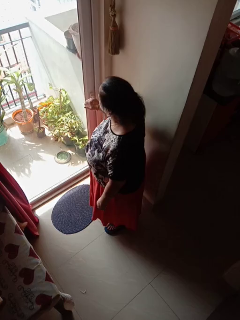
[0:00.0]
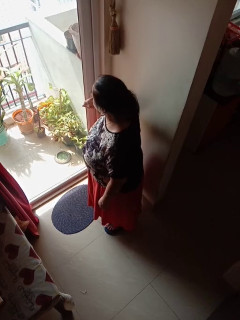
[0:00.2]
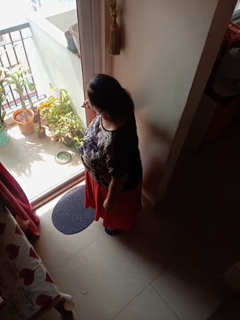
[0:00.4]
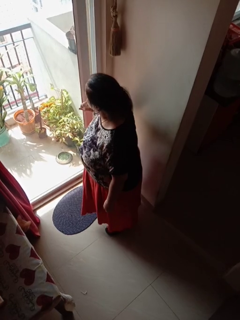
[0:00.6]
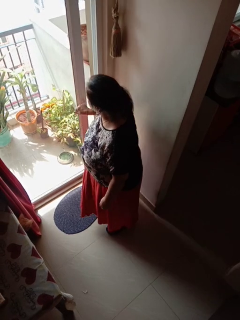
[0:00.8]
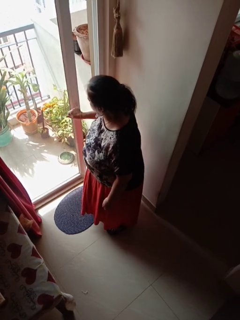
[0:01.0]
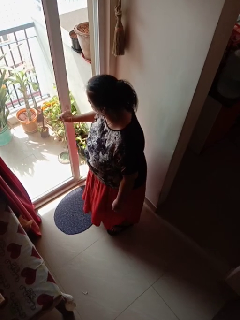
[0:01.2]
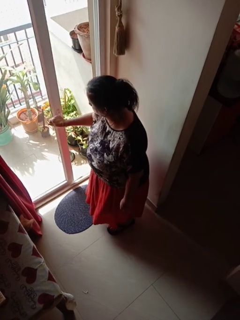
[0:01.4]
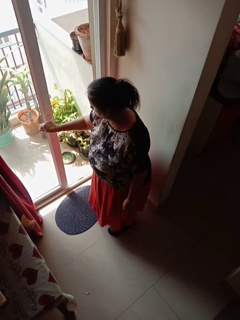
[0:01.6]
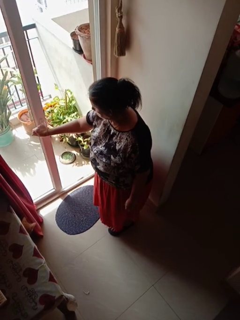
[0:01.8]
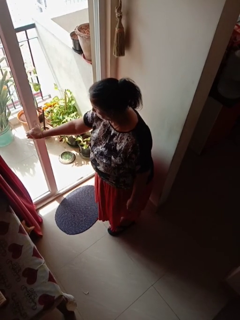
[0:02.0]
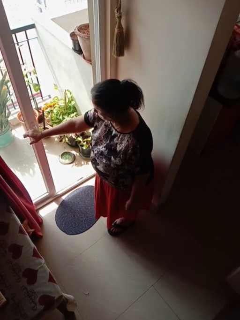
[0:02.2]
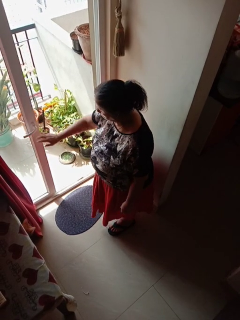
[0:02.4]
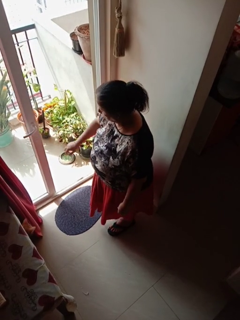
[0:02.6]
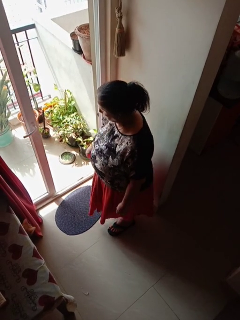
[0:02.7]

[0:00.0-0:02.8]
person opens sliding door

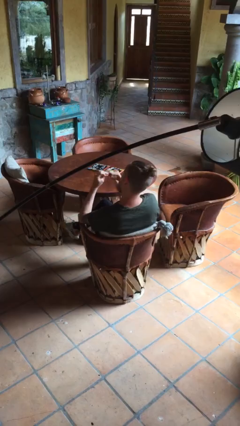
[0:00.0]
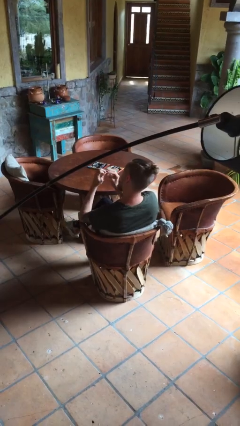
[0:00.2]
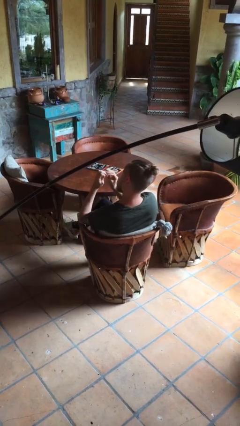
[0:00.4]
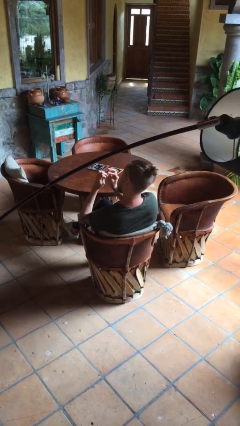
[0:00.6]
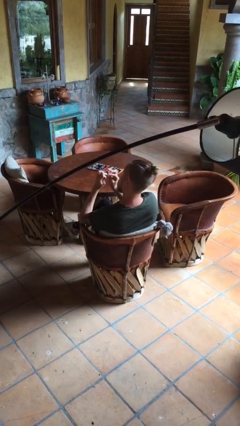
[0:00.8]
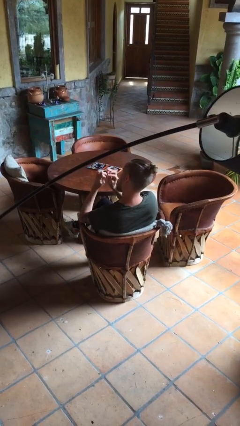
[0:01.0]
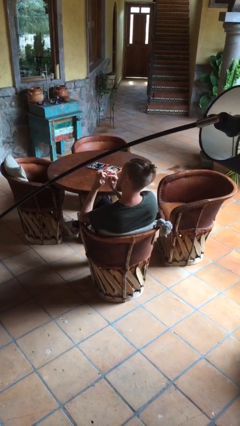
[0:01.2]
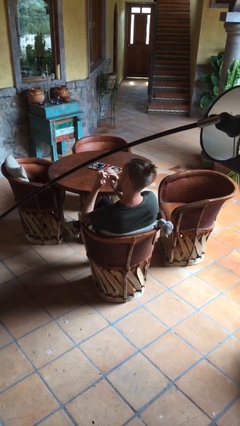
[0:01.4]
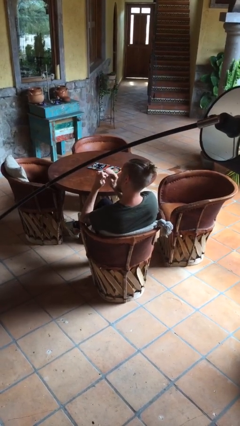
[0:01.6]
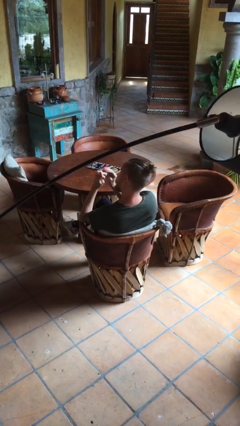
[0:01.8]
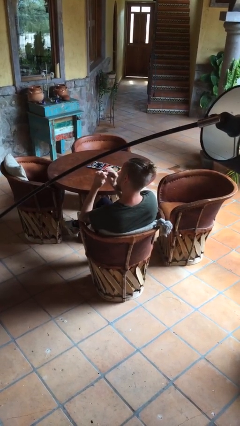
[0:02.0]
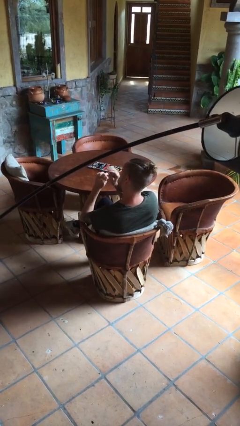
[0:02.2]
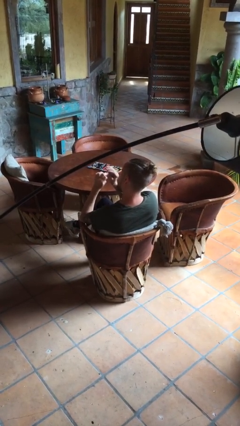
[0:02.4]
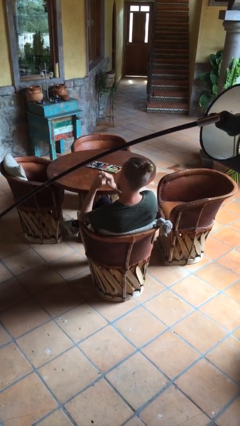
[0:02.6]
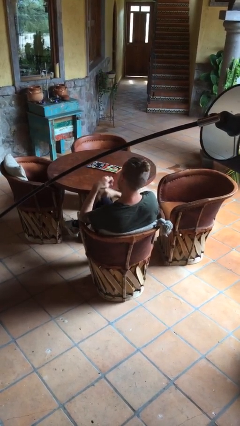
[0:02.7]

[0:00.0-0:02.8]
person files fingernails

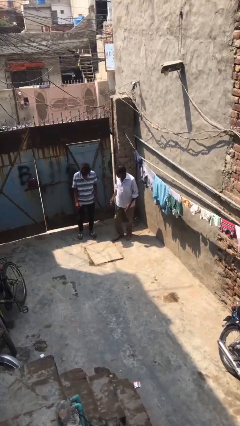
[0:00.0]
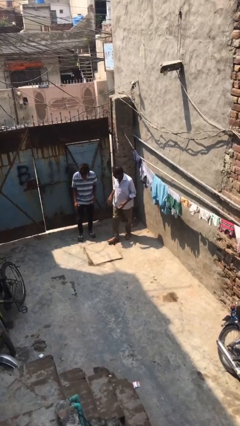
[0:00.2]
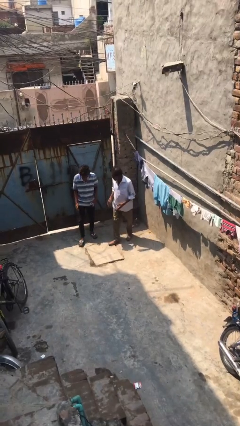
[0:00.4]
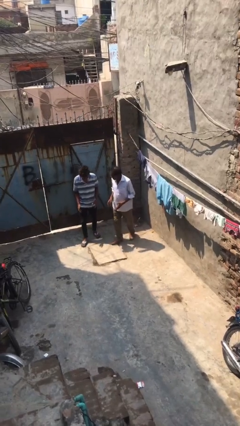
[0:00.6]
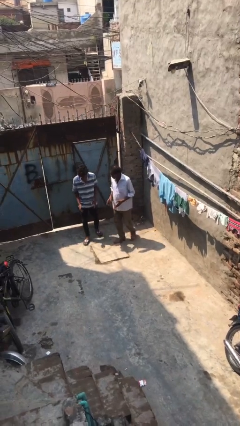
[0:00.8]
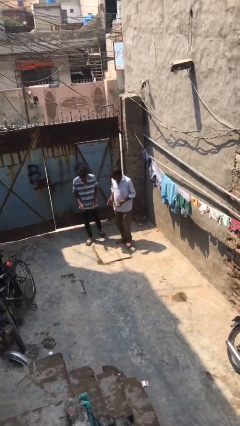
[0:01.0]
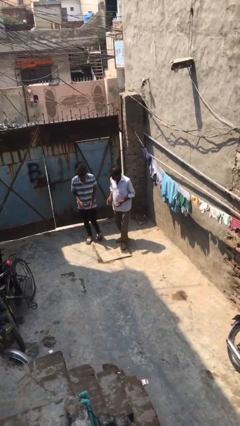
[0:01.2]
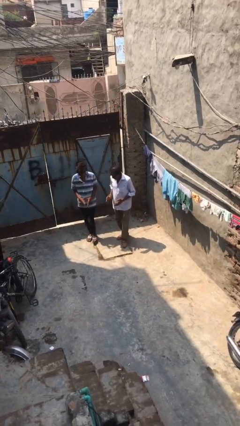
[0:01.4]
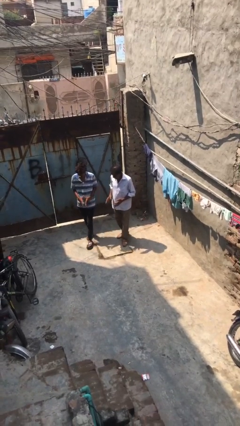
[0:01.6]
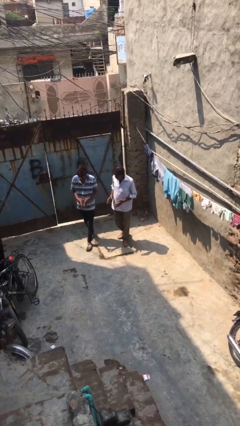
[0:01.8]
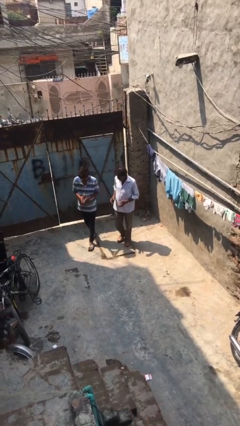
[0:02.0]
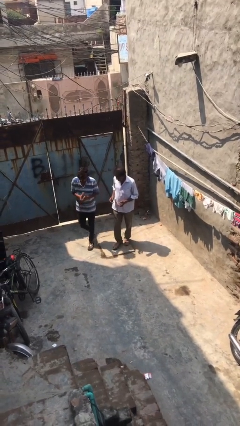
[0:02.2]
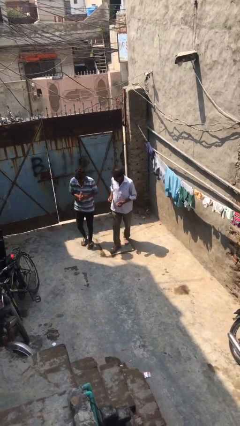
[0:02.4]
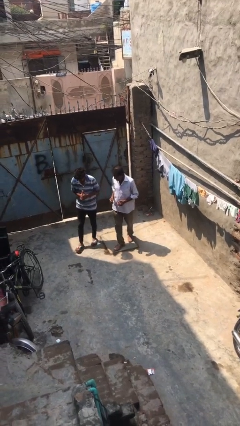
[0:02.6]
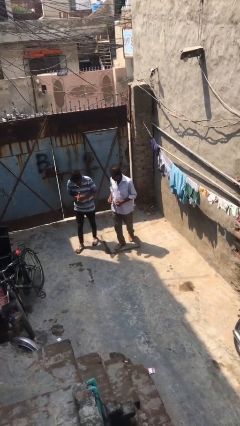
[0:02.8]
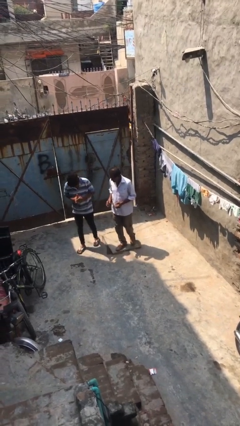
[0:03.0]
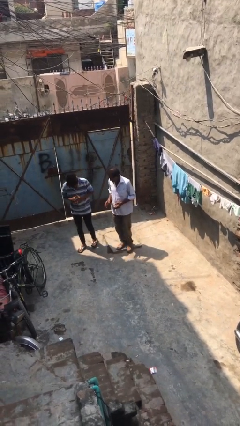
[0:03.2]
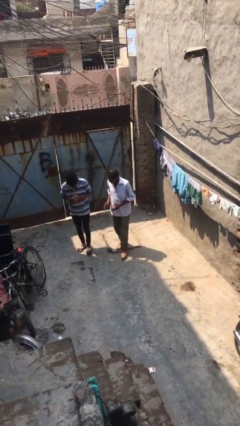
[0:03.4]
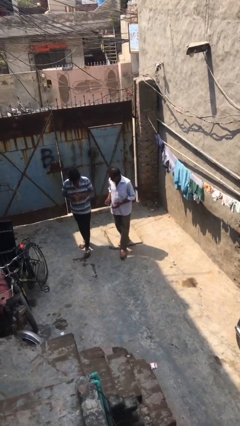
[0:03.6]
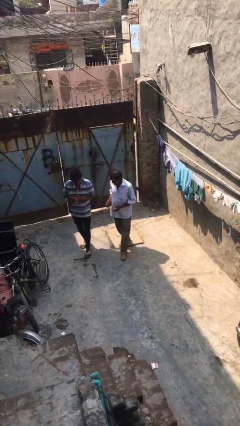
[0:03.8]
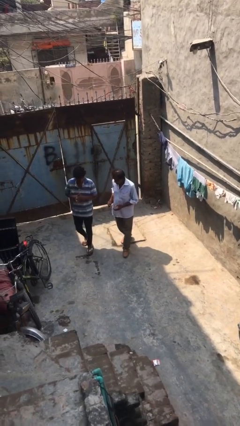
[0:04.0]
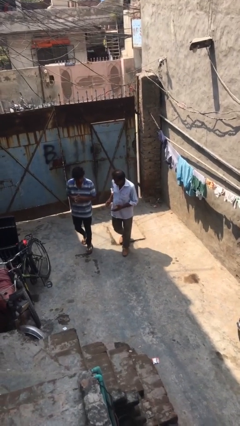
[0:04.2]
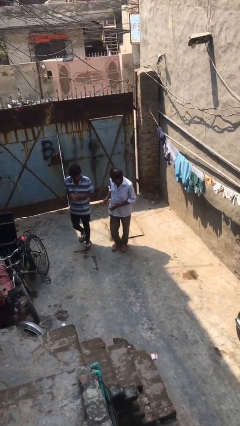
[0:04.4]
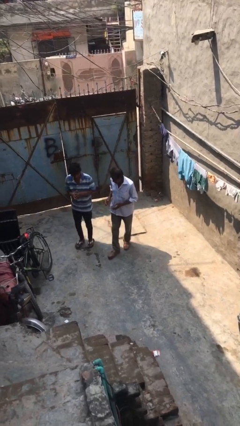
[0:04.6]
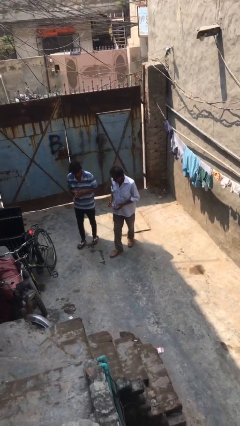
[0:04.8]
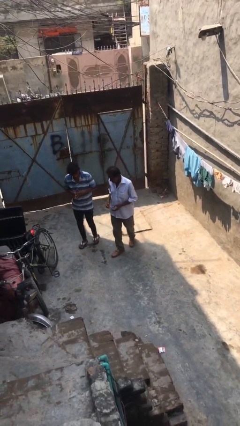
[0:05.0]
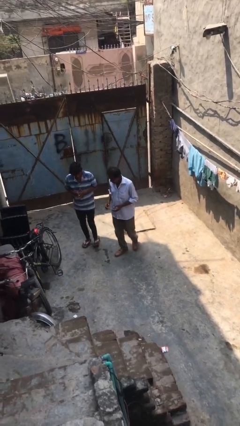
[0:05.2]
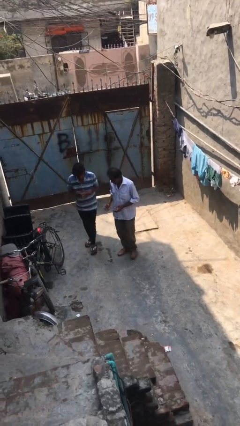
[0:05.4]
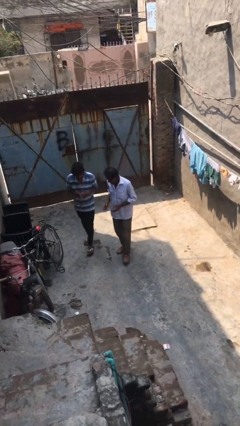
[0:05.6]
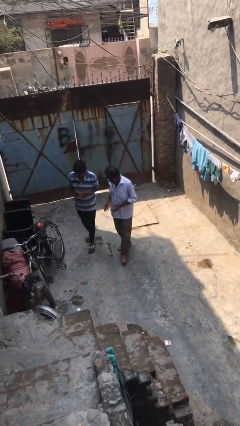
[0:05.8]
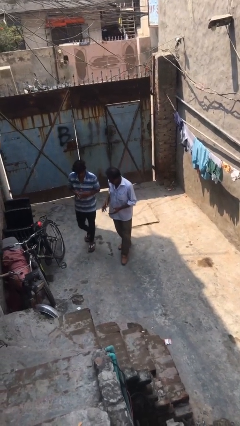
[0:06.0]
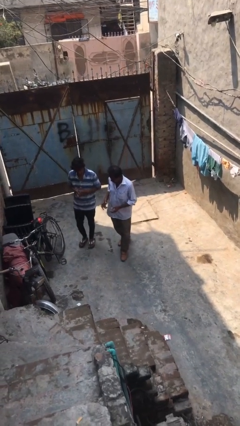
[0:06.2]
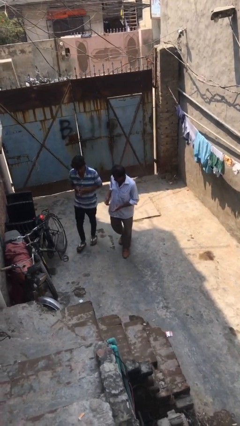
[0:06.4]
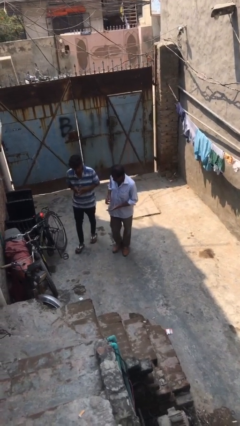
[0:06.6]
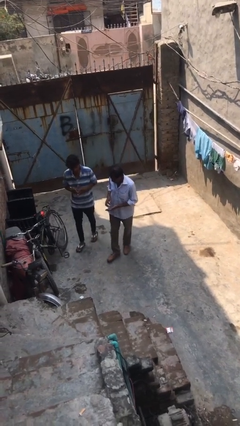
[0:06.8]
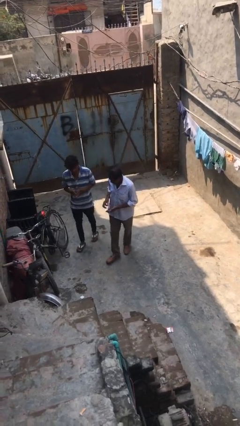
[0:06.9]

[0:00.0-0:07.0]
person talks to person

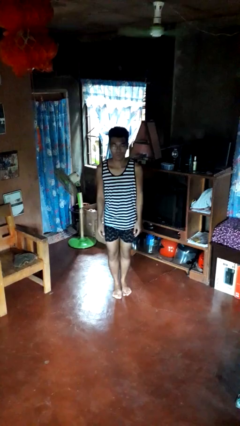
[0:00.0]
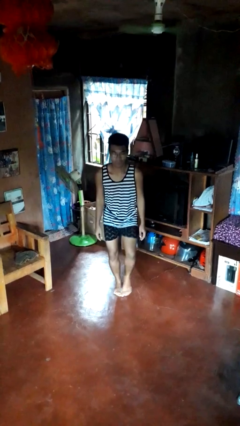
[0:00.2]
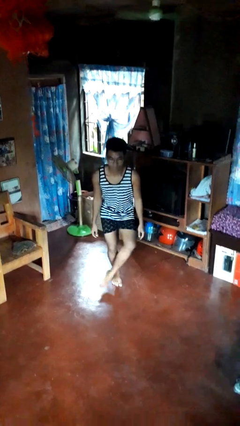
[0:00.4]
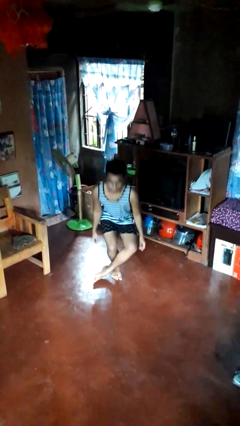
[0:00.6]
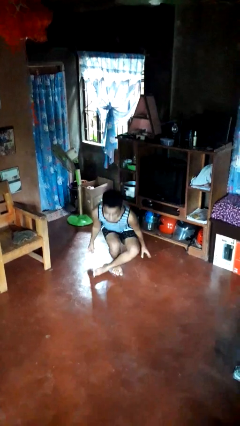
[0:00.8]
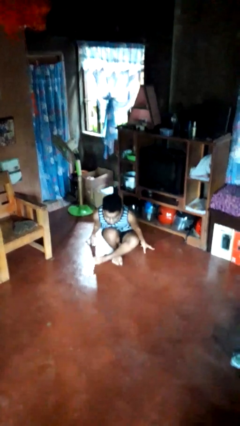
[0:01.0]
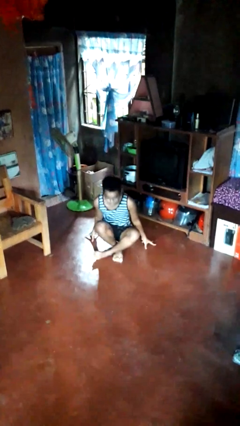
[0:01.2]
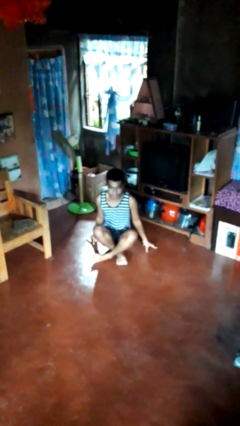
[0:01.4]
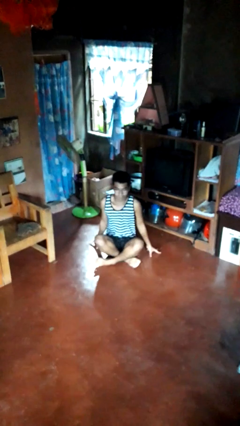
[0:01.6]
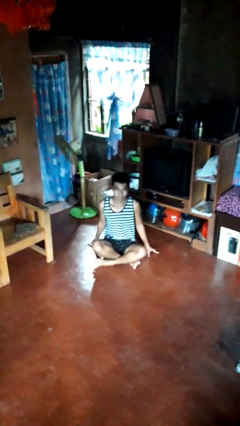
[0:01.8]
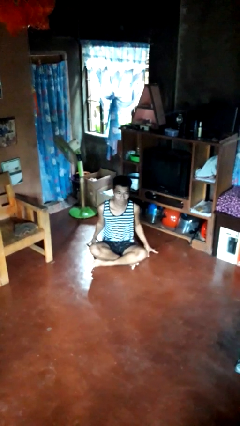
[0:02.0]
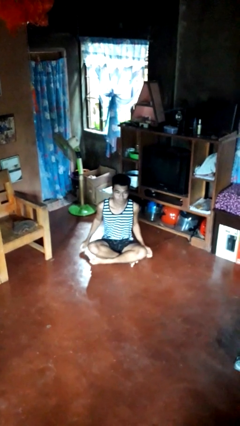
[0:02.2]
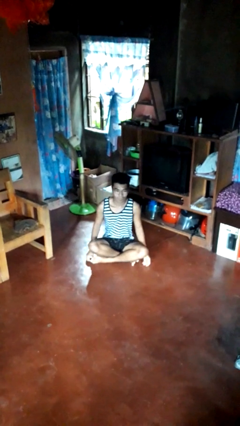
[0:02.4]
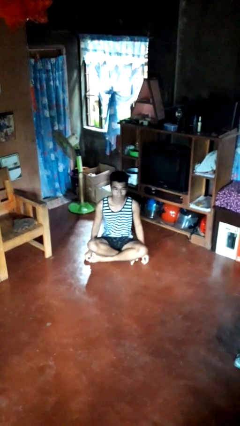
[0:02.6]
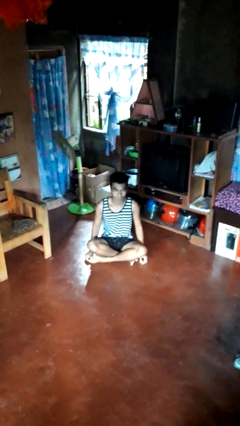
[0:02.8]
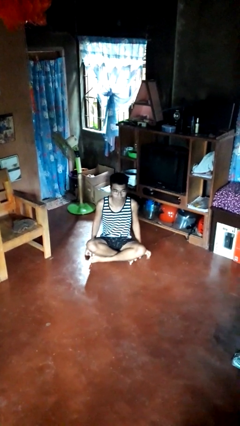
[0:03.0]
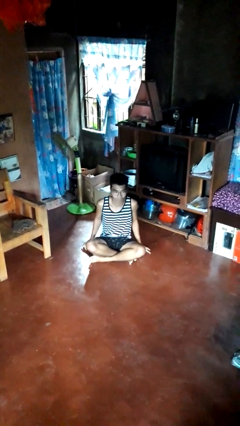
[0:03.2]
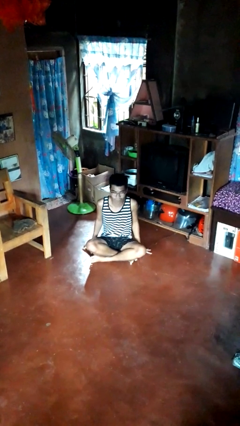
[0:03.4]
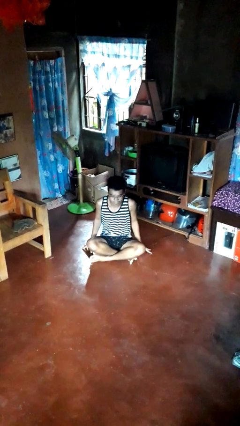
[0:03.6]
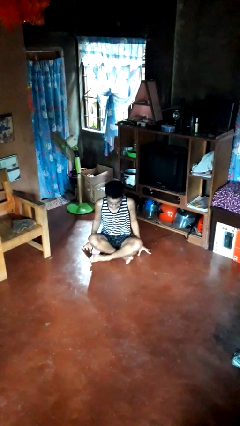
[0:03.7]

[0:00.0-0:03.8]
person sits crisscross

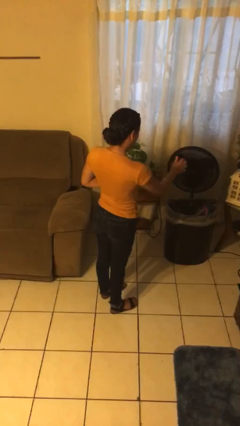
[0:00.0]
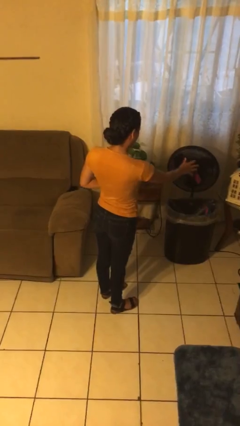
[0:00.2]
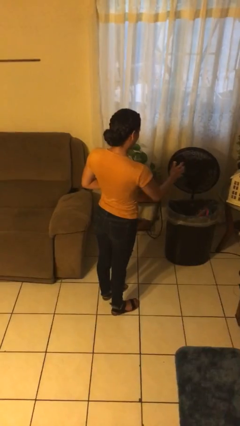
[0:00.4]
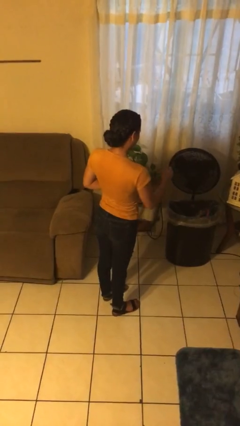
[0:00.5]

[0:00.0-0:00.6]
person discards trash

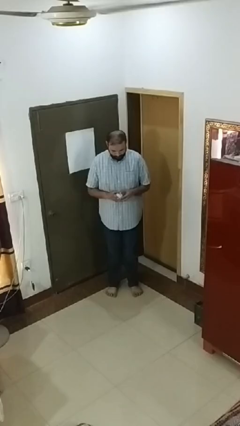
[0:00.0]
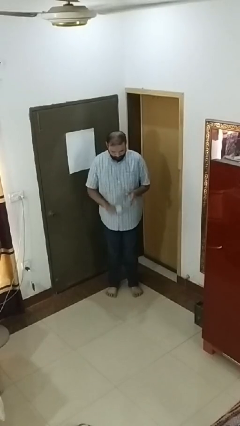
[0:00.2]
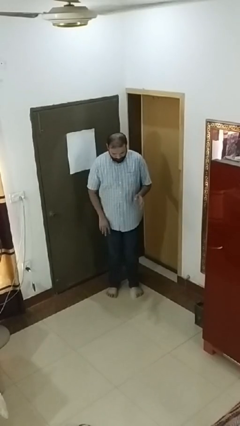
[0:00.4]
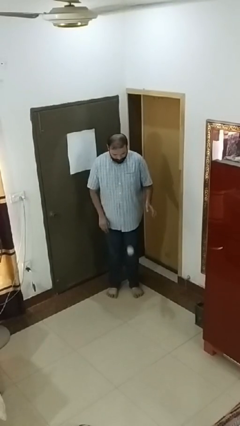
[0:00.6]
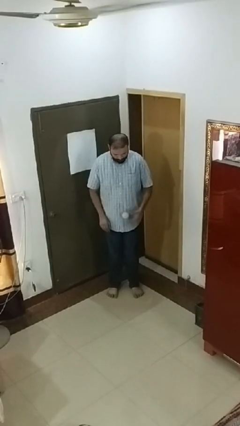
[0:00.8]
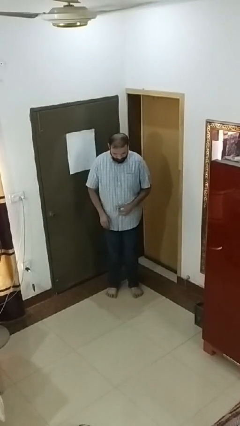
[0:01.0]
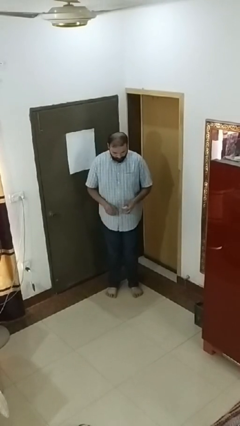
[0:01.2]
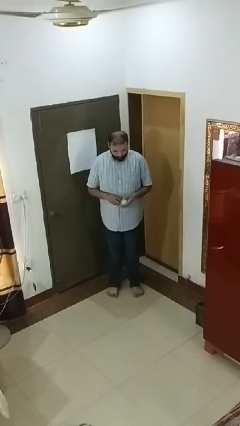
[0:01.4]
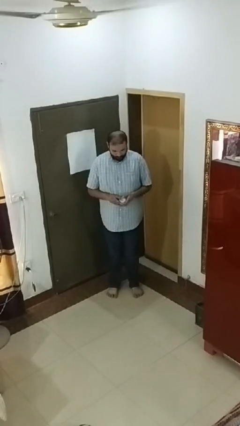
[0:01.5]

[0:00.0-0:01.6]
person bounces ball on floor
